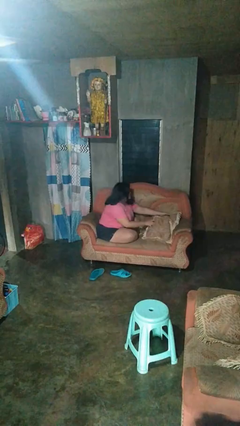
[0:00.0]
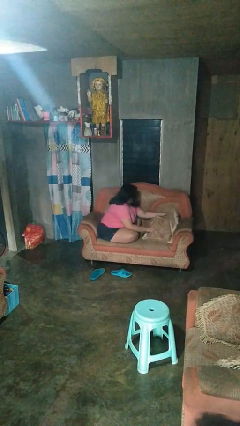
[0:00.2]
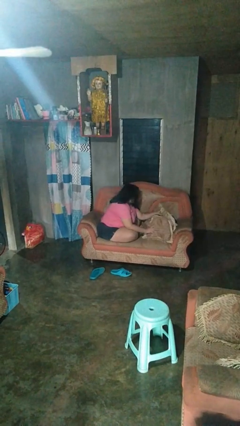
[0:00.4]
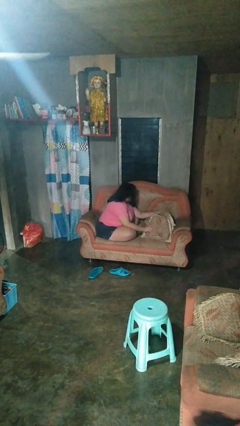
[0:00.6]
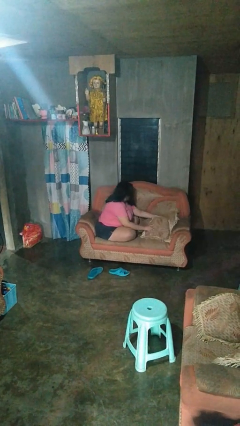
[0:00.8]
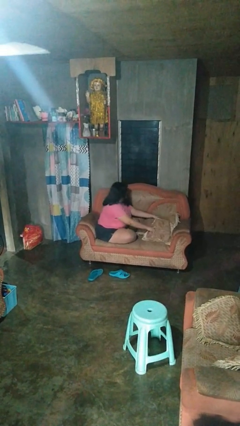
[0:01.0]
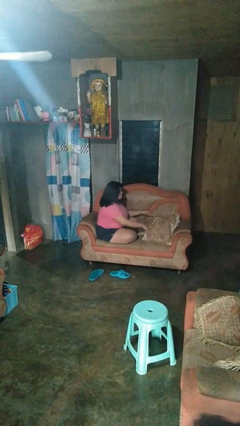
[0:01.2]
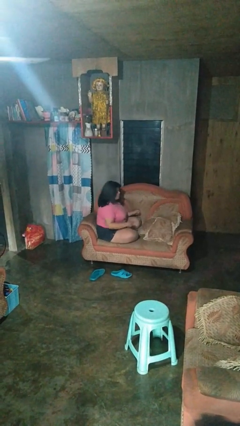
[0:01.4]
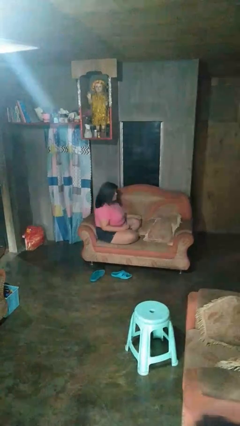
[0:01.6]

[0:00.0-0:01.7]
person searches in couch

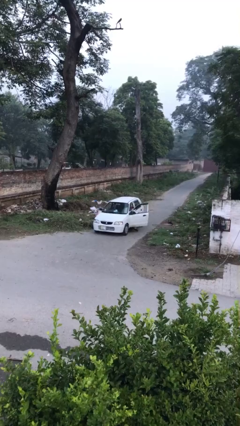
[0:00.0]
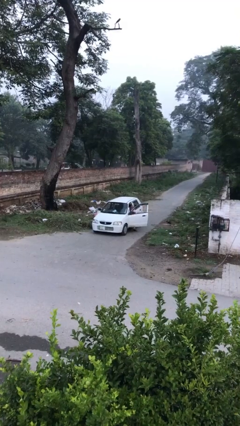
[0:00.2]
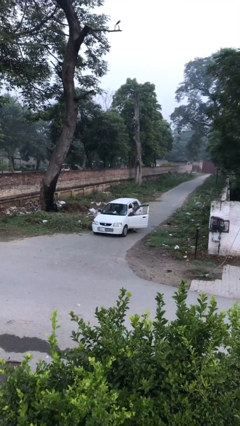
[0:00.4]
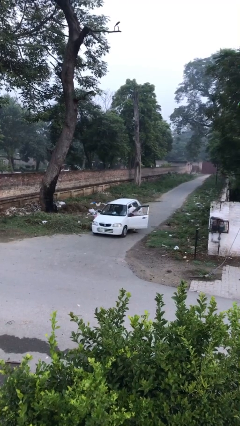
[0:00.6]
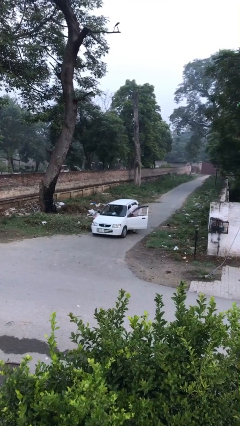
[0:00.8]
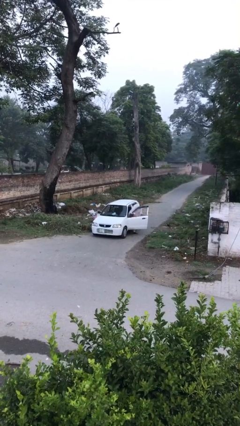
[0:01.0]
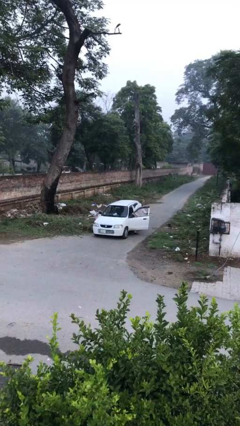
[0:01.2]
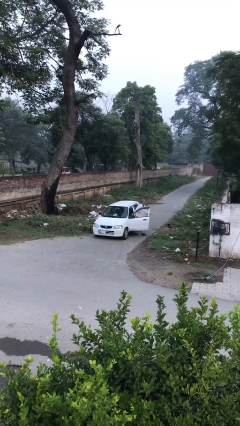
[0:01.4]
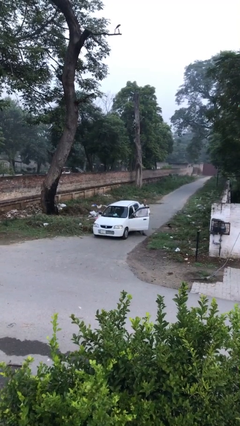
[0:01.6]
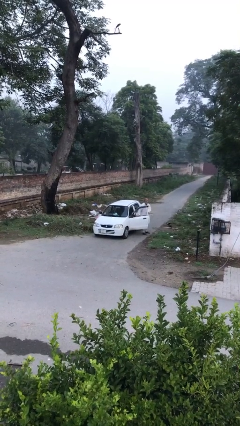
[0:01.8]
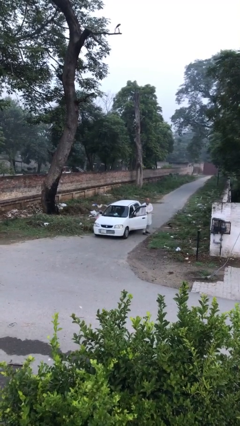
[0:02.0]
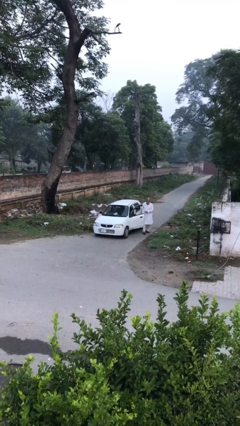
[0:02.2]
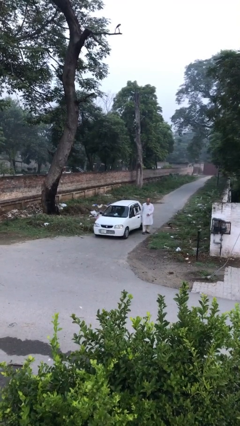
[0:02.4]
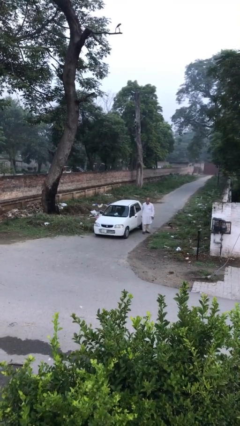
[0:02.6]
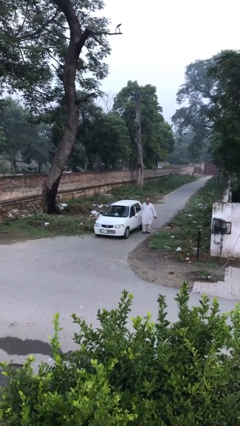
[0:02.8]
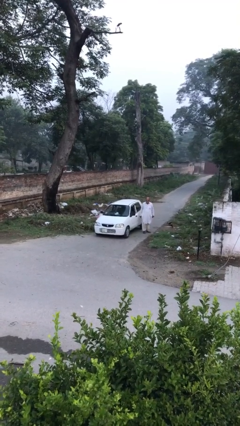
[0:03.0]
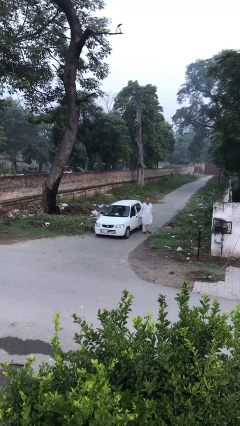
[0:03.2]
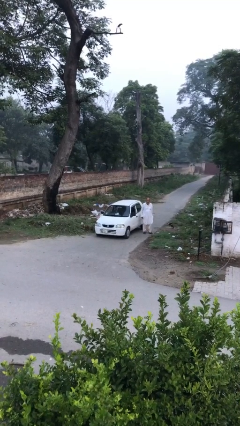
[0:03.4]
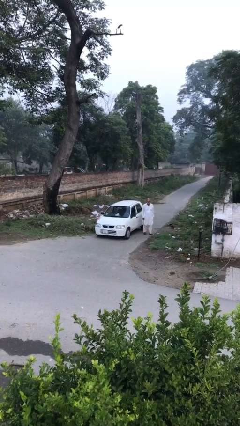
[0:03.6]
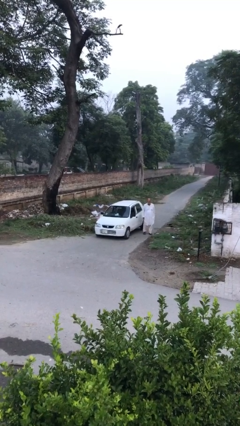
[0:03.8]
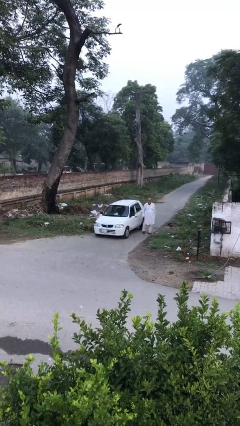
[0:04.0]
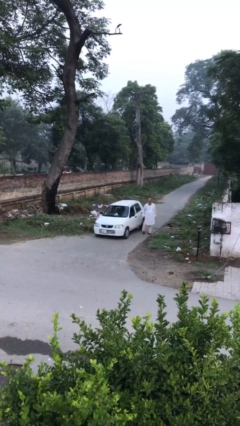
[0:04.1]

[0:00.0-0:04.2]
car drops off person

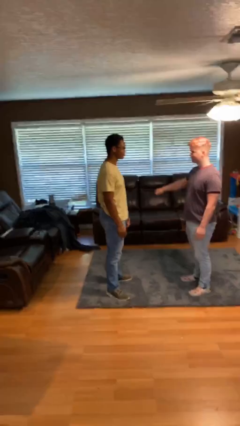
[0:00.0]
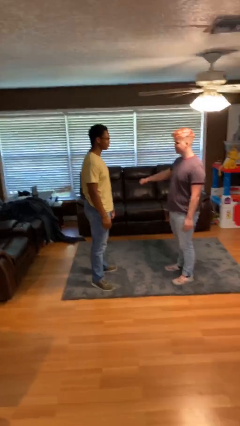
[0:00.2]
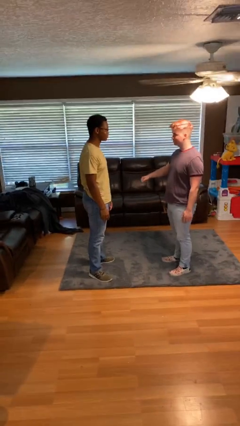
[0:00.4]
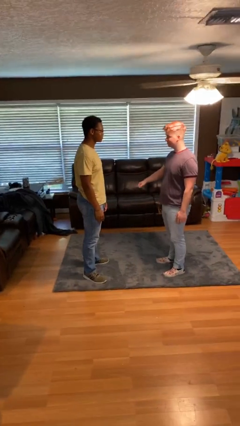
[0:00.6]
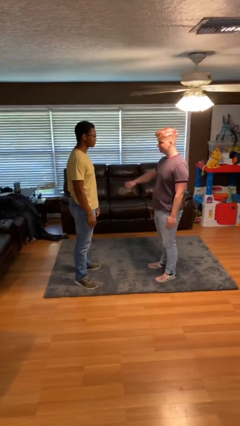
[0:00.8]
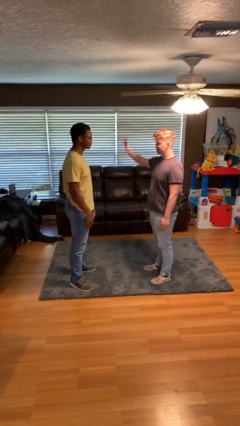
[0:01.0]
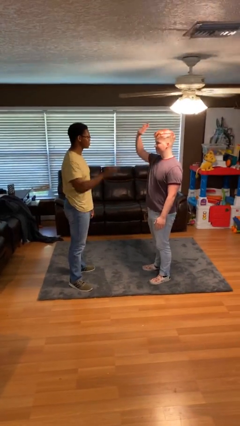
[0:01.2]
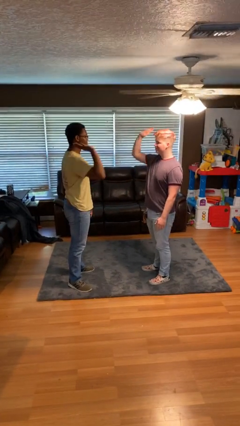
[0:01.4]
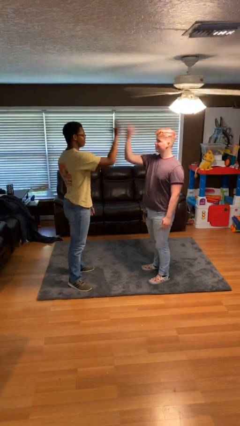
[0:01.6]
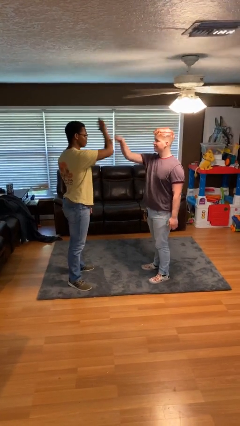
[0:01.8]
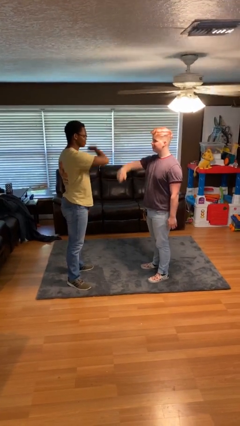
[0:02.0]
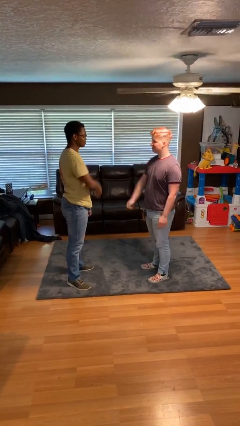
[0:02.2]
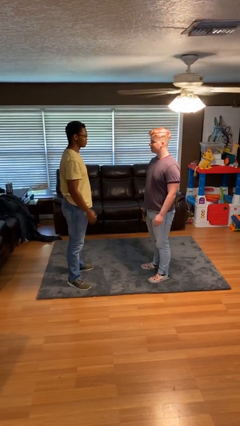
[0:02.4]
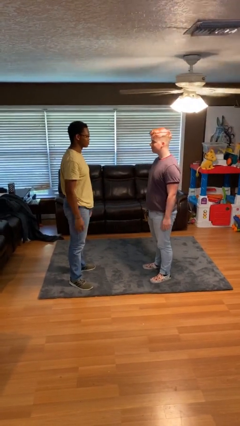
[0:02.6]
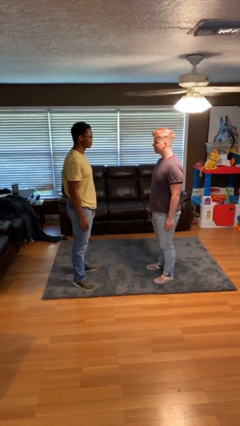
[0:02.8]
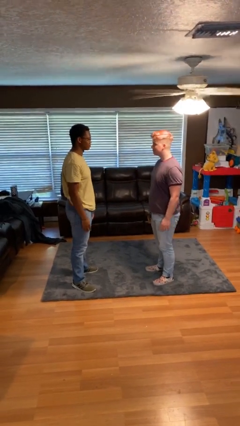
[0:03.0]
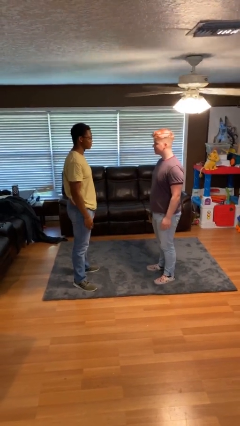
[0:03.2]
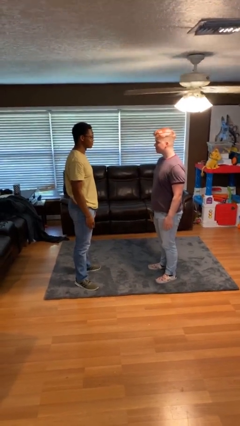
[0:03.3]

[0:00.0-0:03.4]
person highfives hand

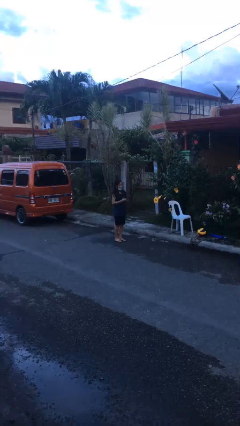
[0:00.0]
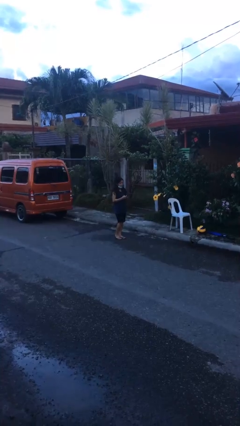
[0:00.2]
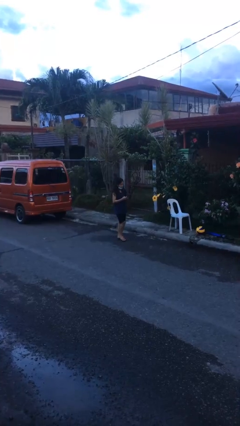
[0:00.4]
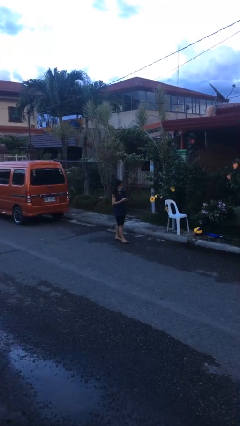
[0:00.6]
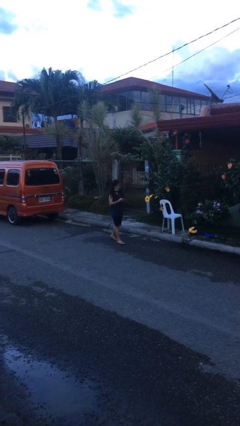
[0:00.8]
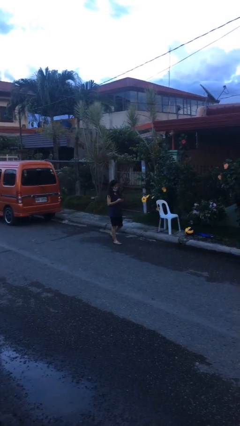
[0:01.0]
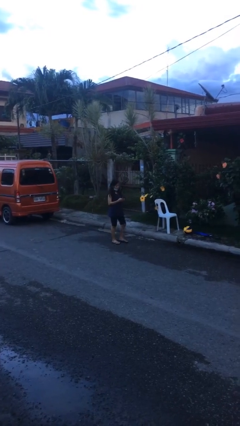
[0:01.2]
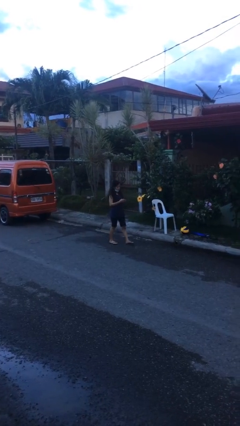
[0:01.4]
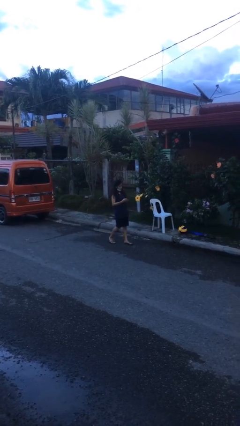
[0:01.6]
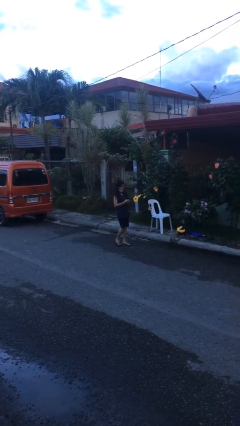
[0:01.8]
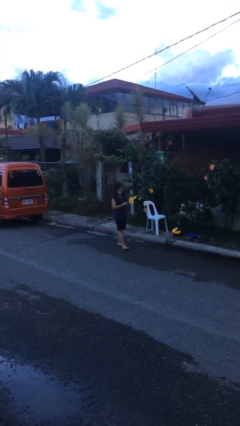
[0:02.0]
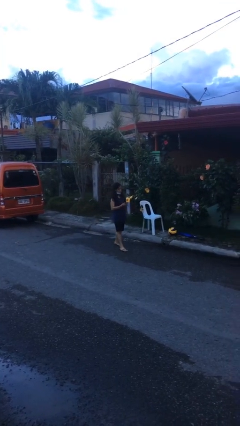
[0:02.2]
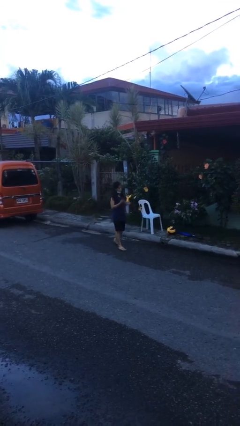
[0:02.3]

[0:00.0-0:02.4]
person texts on phone

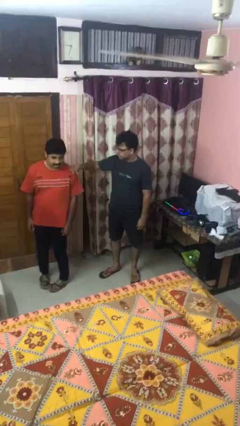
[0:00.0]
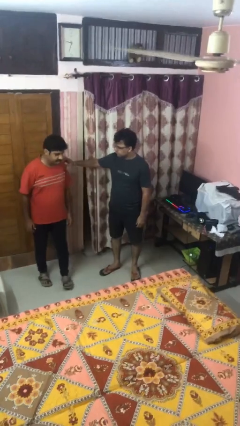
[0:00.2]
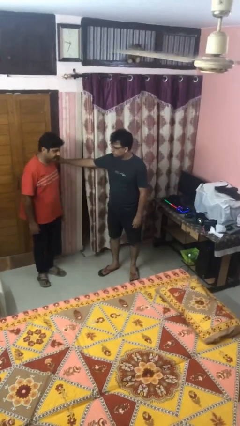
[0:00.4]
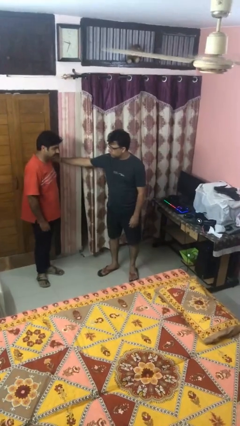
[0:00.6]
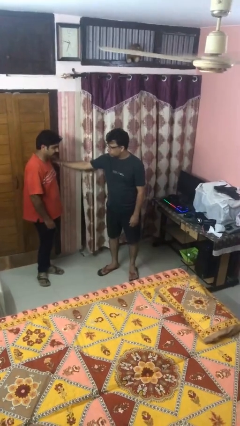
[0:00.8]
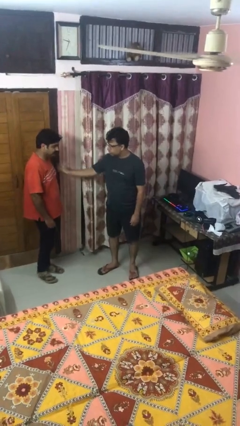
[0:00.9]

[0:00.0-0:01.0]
person spins person around

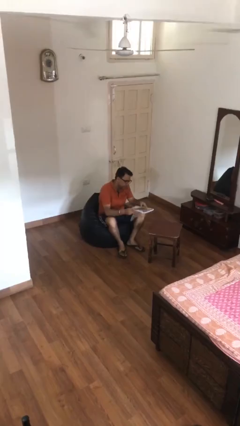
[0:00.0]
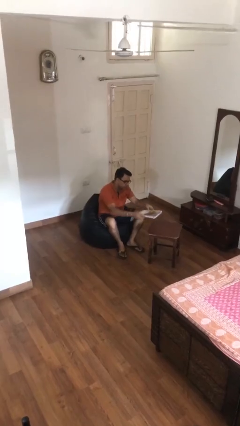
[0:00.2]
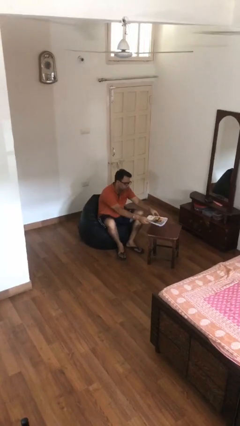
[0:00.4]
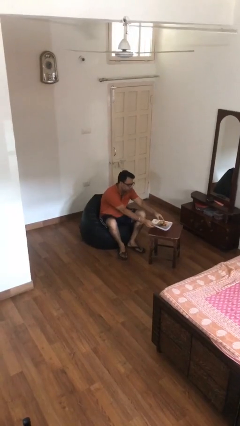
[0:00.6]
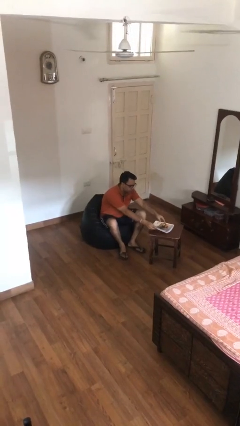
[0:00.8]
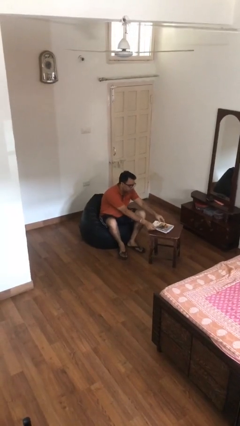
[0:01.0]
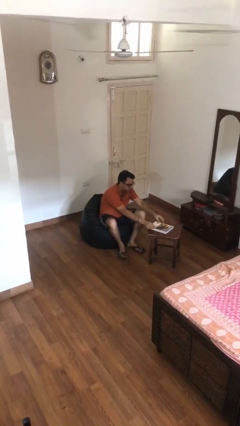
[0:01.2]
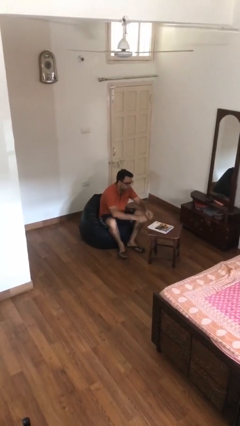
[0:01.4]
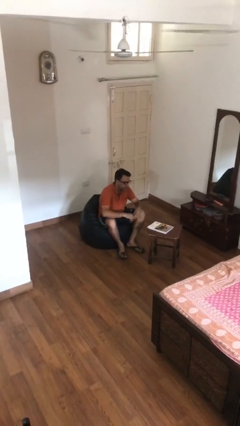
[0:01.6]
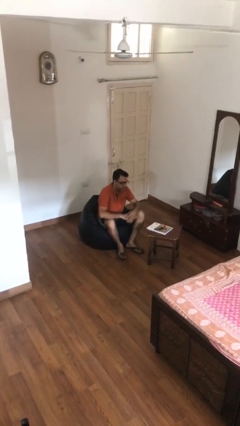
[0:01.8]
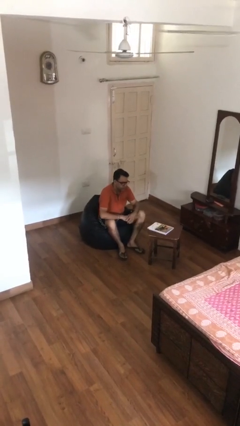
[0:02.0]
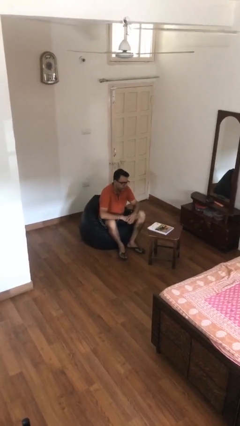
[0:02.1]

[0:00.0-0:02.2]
person puts down object on table

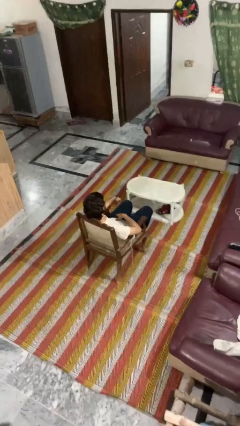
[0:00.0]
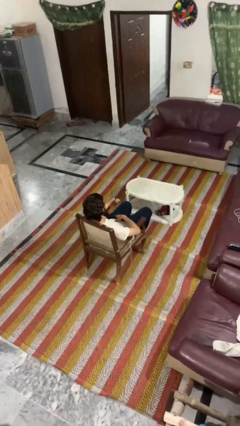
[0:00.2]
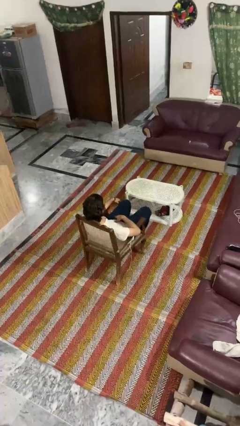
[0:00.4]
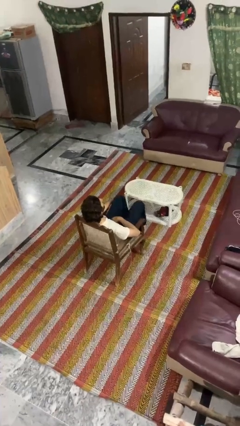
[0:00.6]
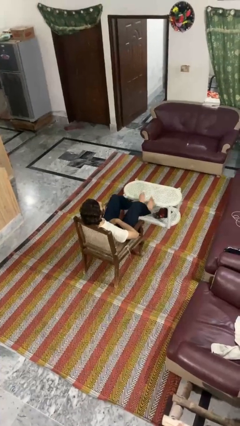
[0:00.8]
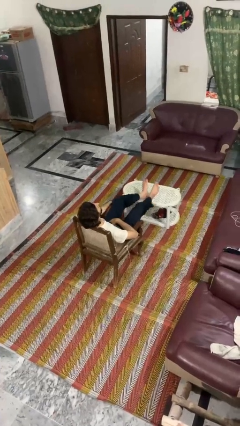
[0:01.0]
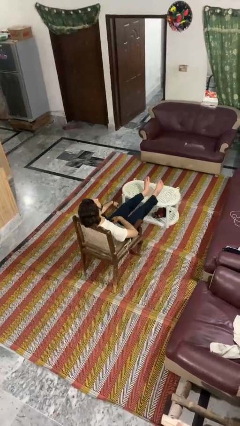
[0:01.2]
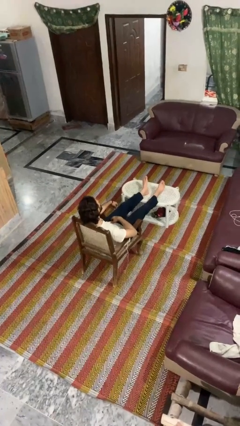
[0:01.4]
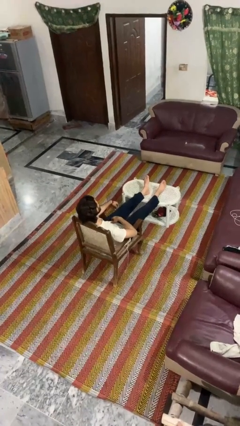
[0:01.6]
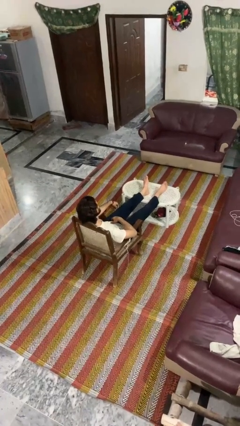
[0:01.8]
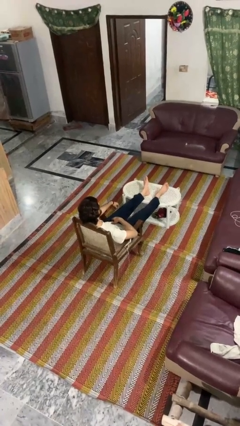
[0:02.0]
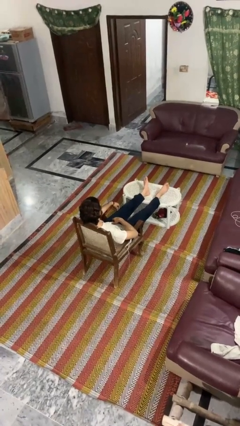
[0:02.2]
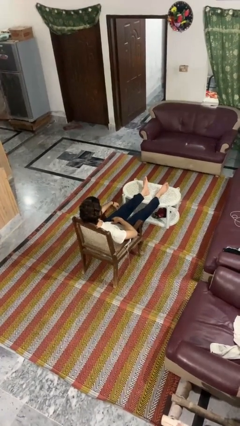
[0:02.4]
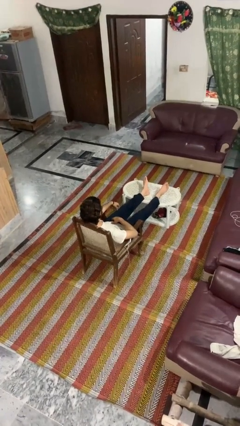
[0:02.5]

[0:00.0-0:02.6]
person puts feet up
